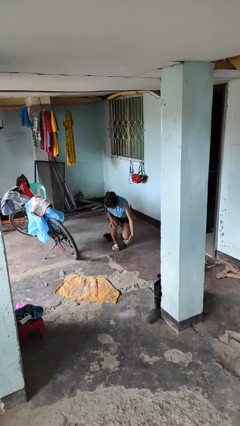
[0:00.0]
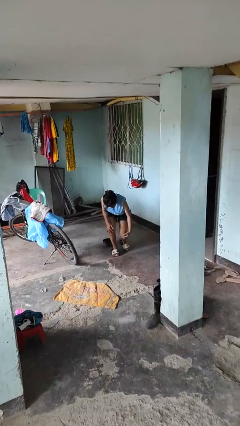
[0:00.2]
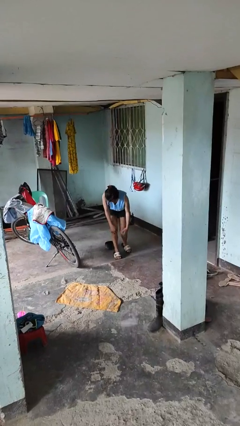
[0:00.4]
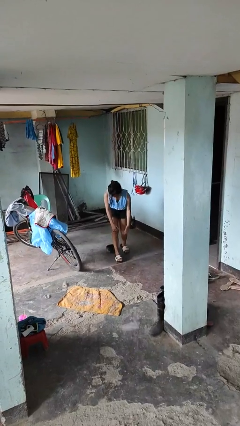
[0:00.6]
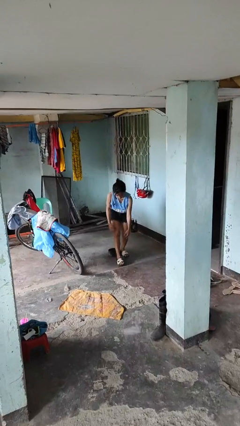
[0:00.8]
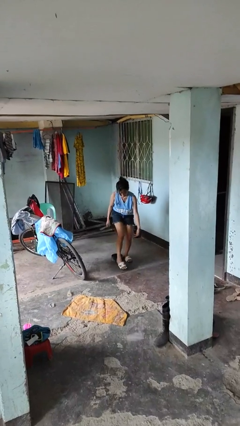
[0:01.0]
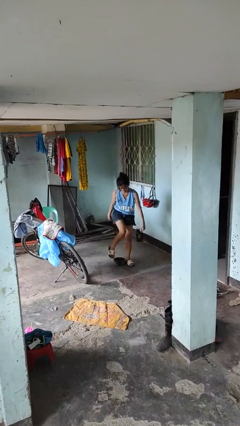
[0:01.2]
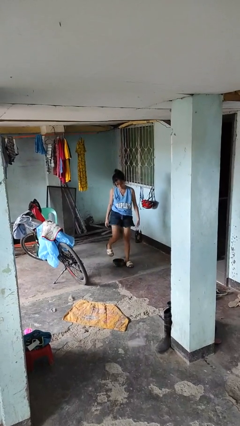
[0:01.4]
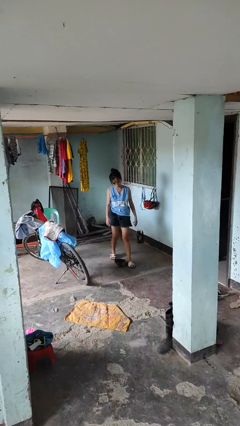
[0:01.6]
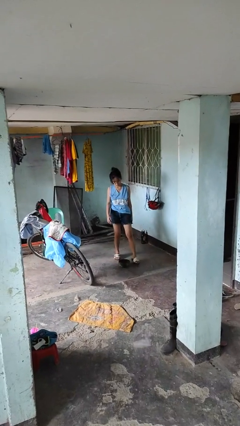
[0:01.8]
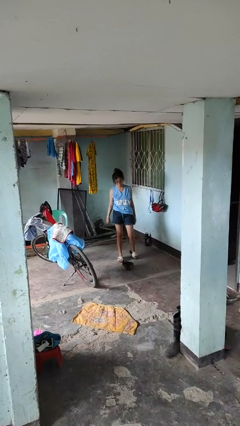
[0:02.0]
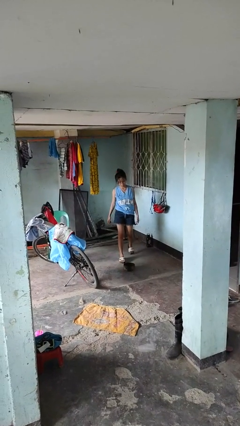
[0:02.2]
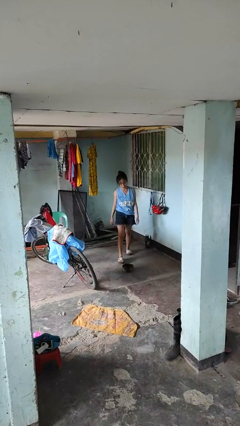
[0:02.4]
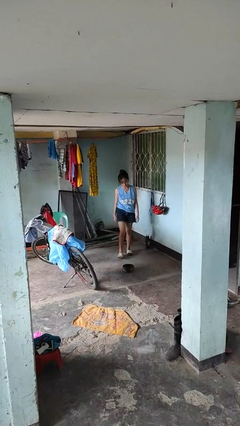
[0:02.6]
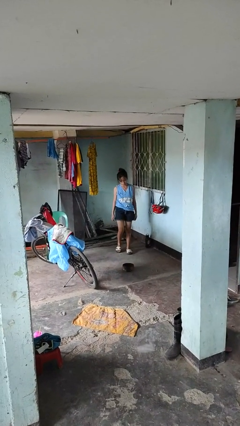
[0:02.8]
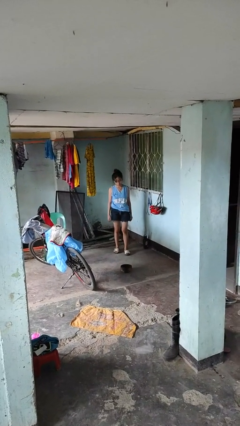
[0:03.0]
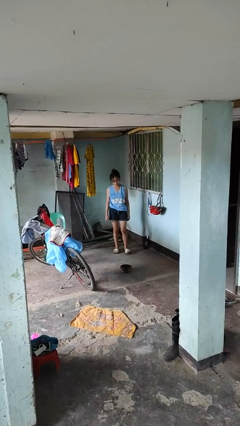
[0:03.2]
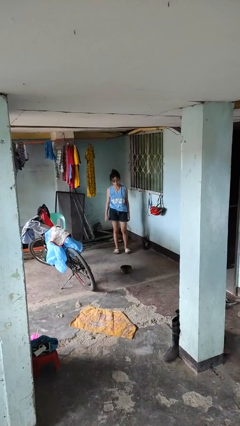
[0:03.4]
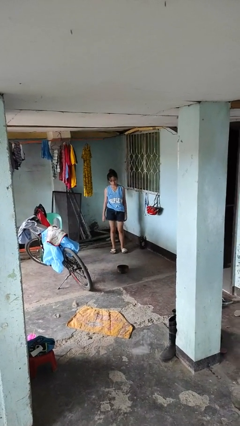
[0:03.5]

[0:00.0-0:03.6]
person stands up from floor

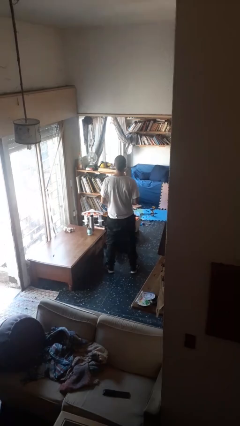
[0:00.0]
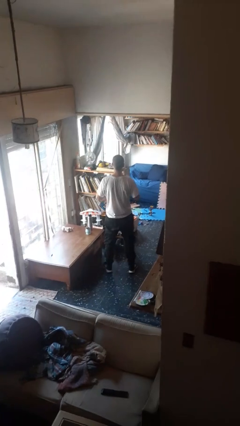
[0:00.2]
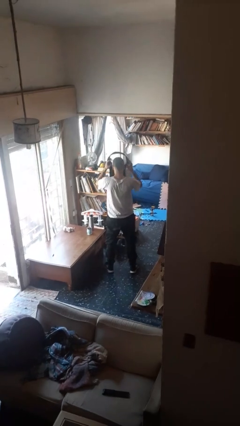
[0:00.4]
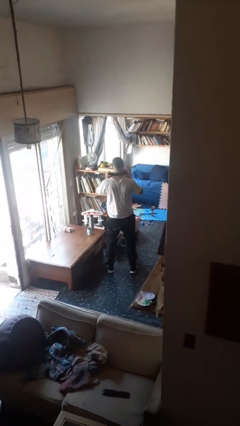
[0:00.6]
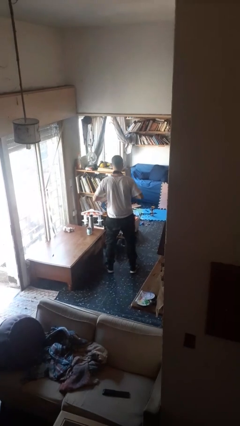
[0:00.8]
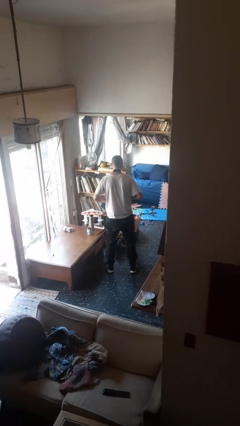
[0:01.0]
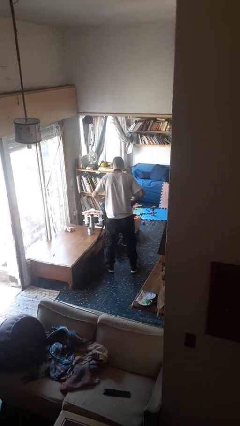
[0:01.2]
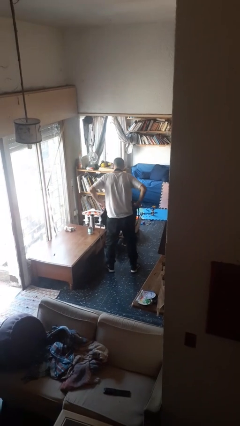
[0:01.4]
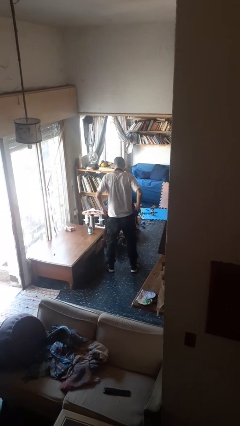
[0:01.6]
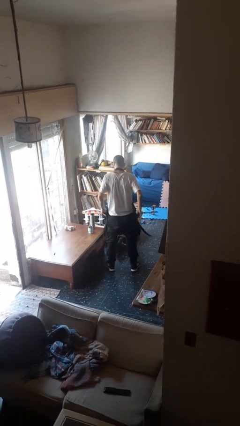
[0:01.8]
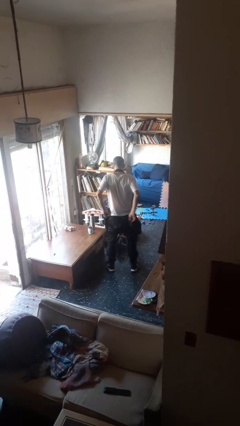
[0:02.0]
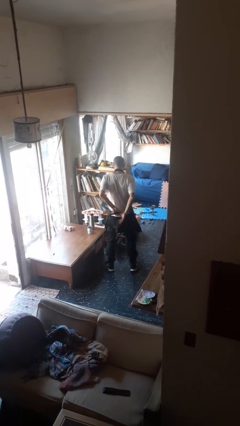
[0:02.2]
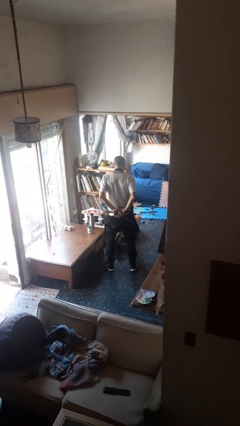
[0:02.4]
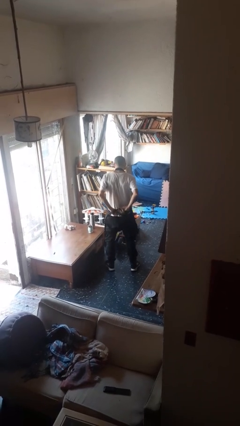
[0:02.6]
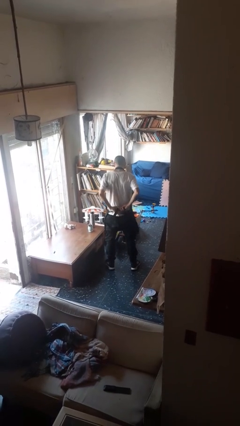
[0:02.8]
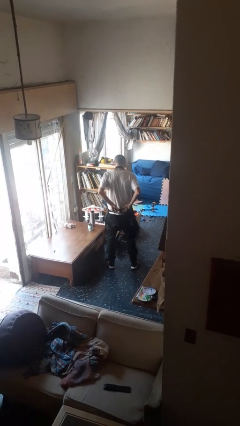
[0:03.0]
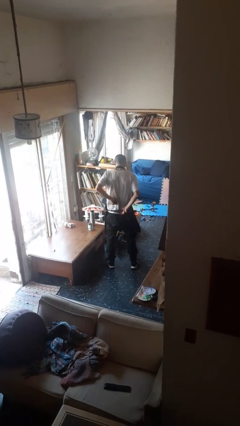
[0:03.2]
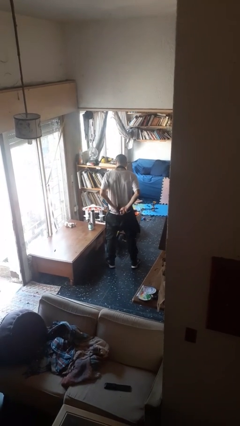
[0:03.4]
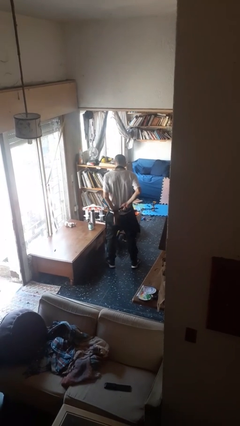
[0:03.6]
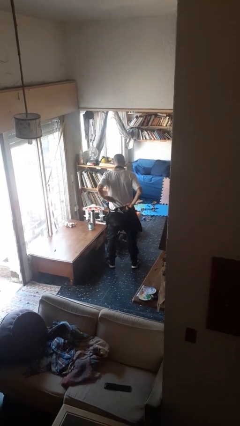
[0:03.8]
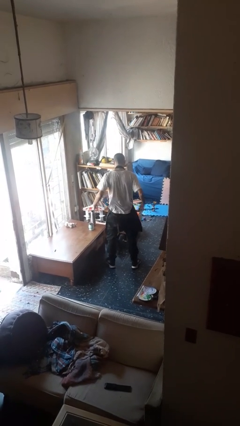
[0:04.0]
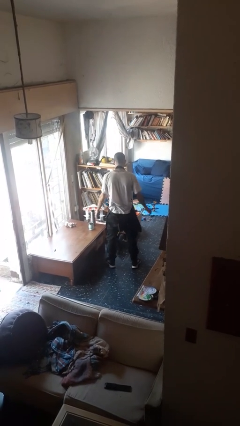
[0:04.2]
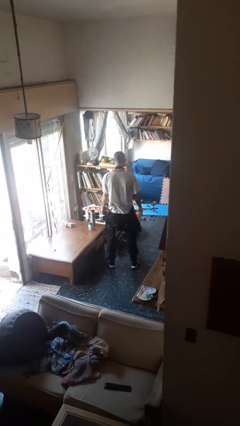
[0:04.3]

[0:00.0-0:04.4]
person puts on apron

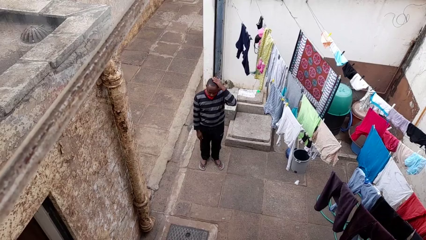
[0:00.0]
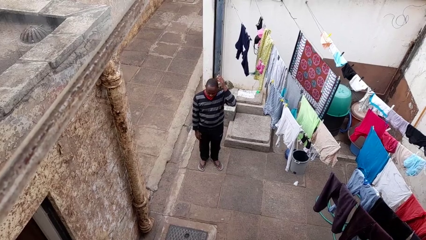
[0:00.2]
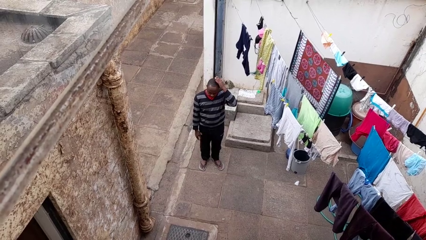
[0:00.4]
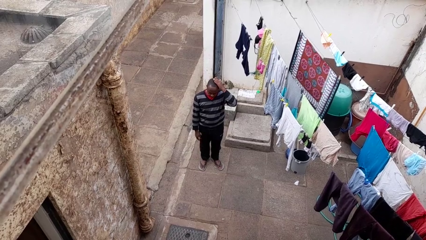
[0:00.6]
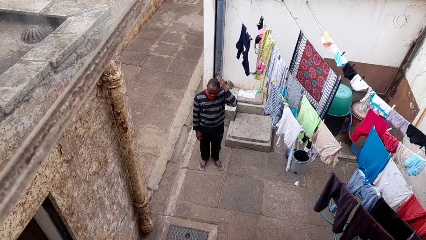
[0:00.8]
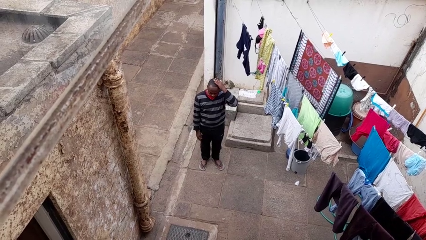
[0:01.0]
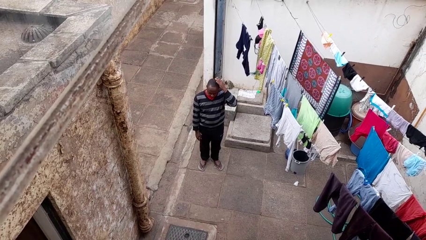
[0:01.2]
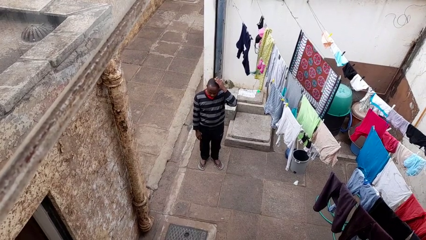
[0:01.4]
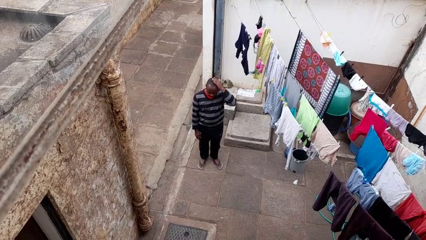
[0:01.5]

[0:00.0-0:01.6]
person pats head

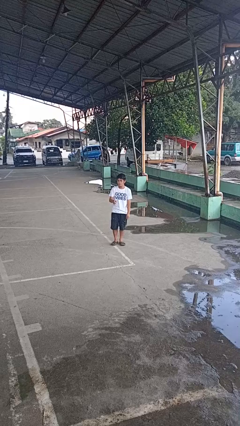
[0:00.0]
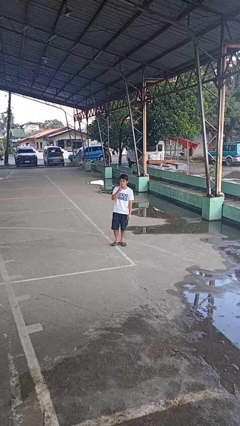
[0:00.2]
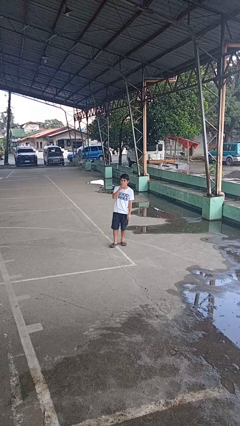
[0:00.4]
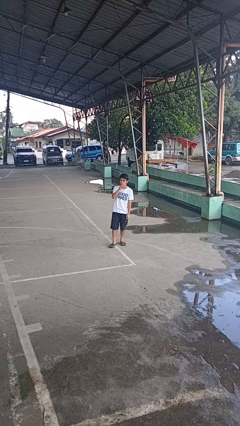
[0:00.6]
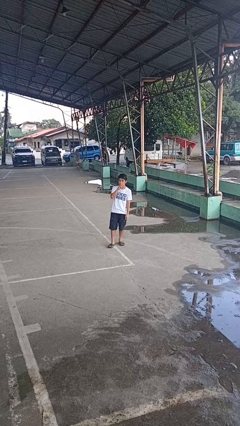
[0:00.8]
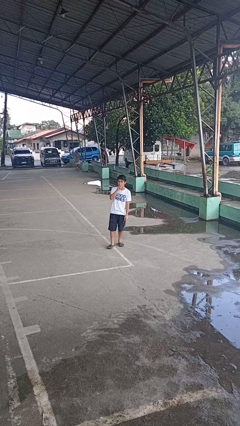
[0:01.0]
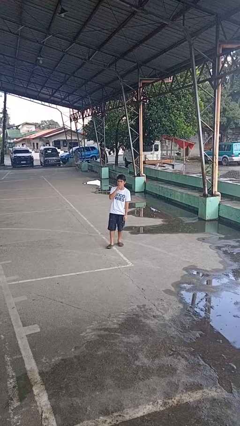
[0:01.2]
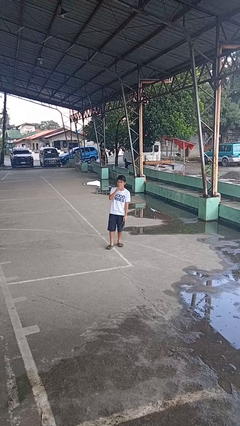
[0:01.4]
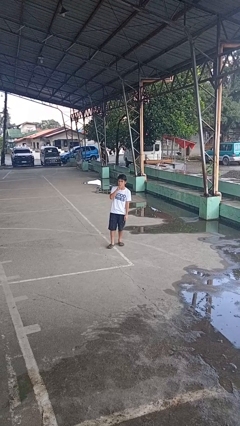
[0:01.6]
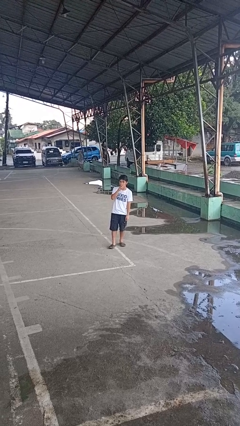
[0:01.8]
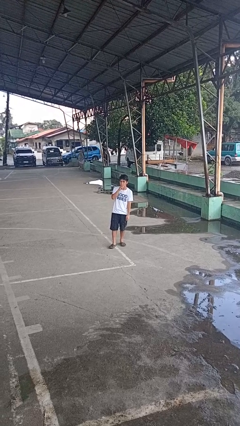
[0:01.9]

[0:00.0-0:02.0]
person gestures be quiet

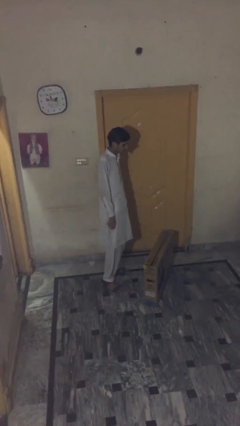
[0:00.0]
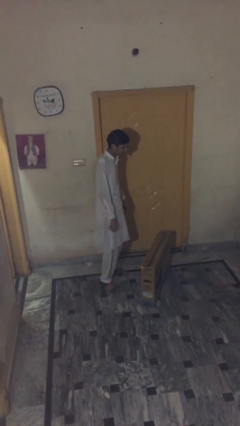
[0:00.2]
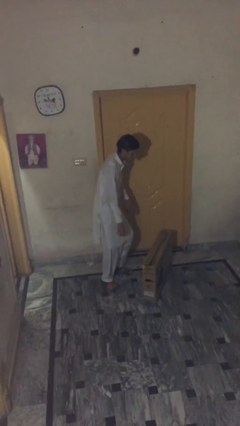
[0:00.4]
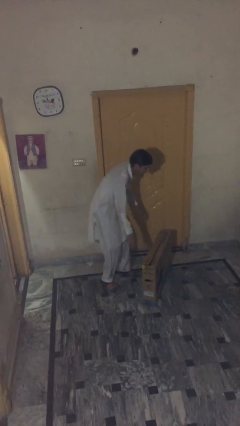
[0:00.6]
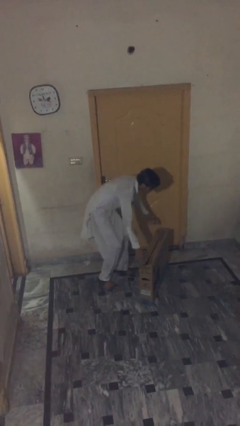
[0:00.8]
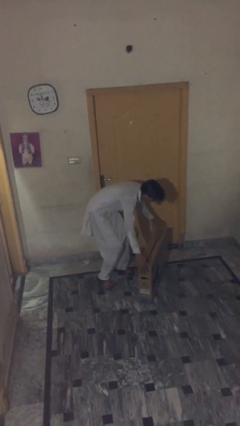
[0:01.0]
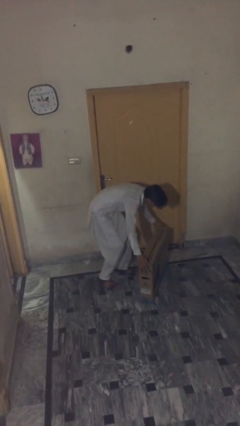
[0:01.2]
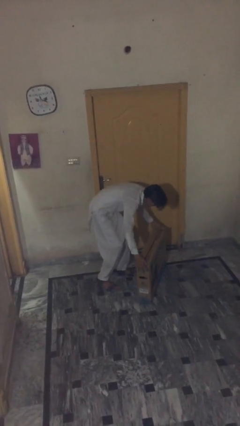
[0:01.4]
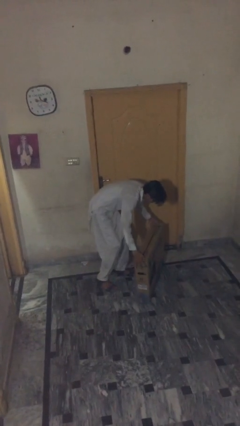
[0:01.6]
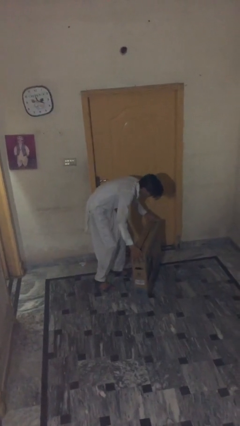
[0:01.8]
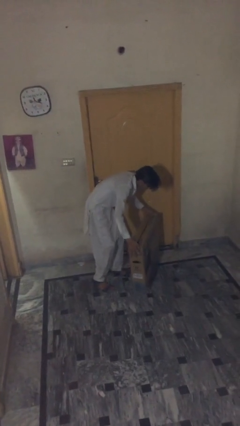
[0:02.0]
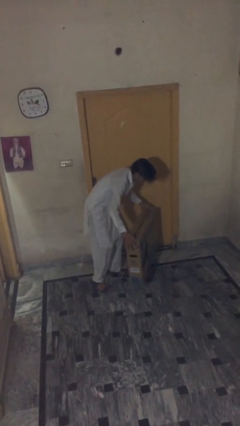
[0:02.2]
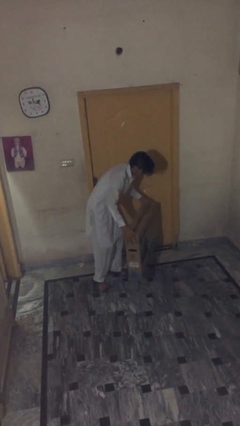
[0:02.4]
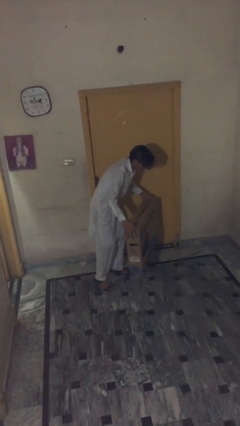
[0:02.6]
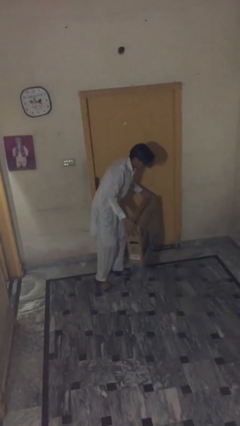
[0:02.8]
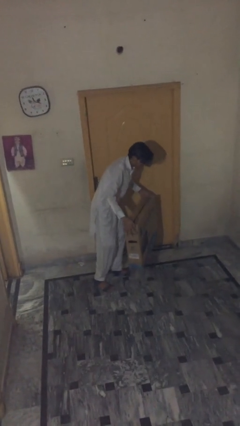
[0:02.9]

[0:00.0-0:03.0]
person picks up object from floor

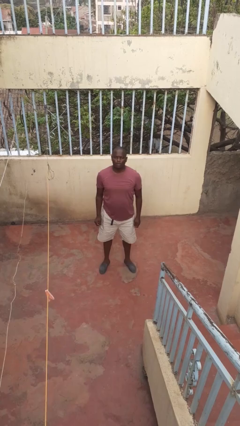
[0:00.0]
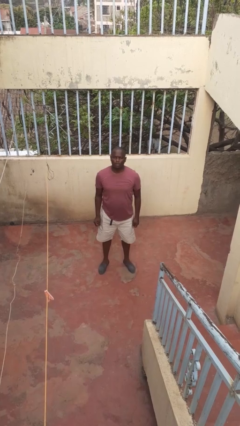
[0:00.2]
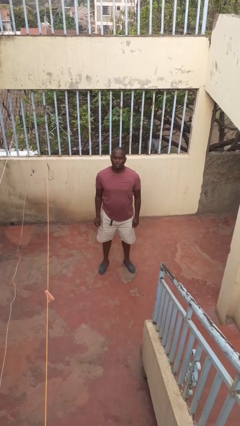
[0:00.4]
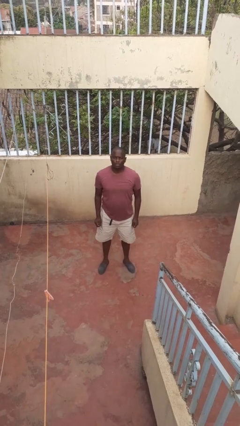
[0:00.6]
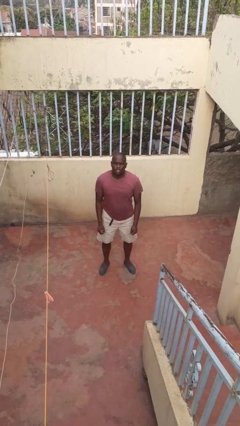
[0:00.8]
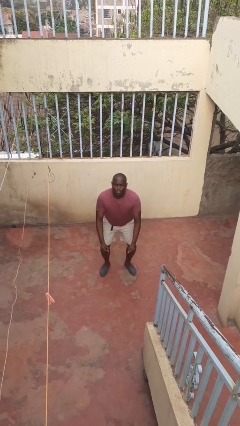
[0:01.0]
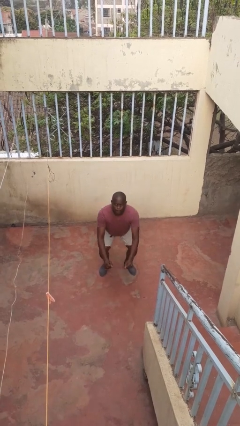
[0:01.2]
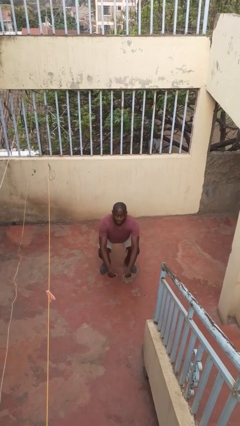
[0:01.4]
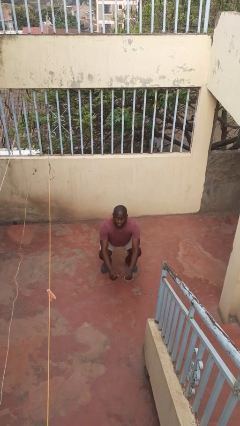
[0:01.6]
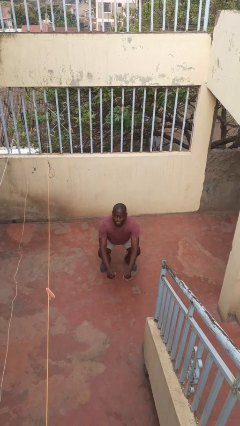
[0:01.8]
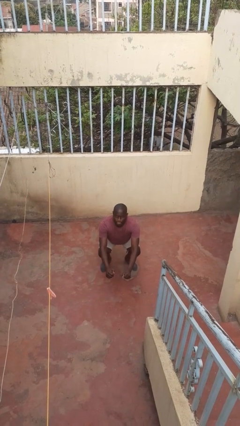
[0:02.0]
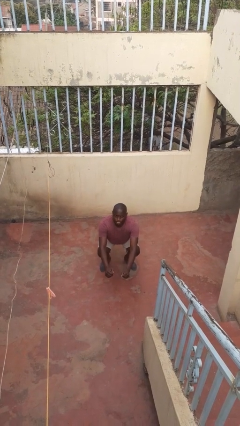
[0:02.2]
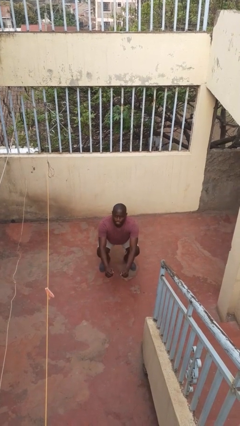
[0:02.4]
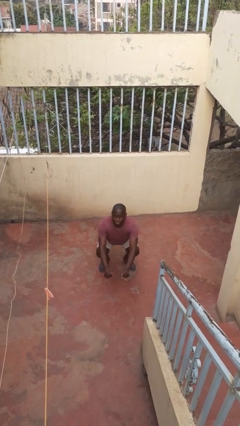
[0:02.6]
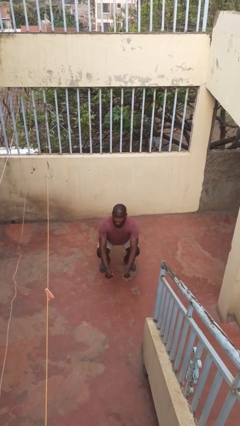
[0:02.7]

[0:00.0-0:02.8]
person squats

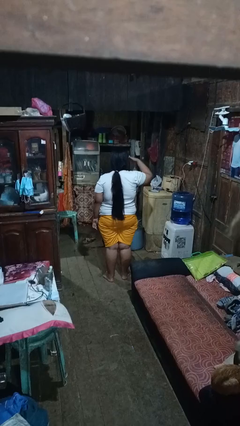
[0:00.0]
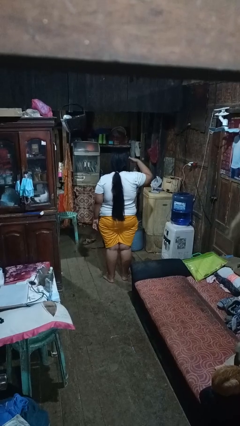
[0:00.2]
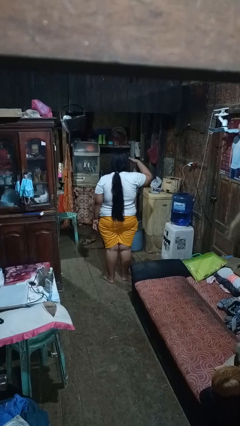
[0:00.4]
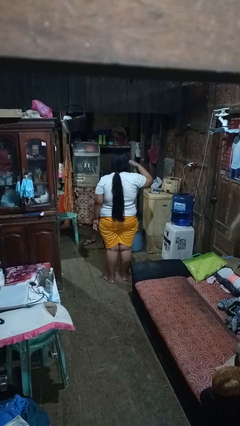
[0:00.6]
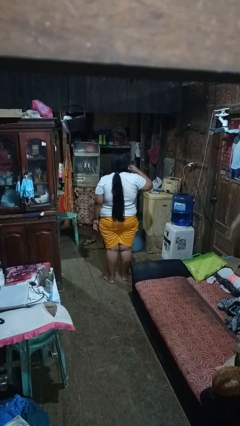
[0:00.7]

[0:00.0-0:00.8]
person salutes
